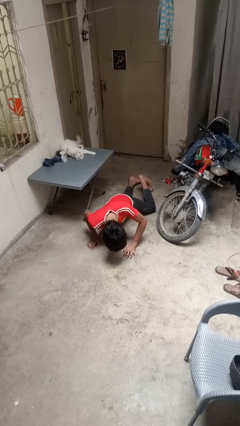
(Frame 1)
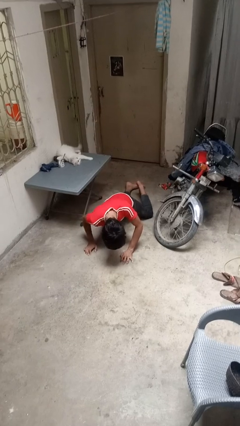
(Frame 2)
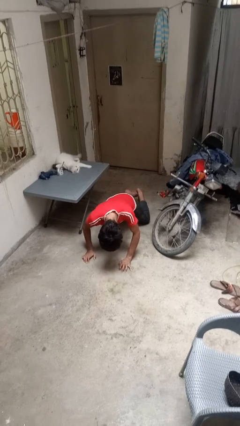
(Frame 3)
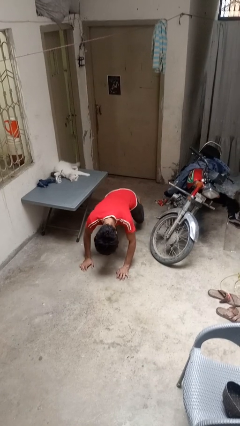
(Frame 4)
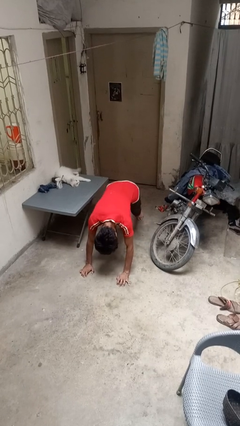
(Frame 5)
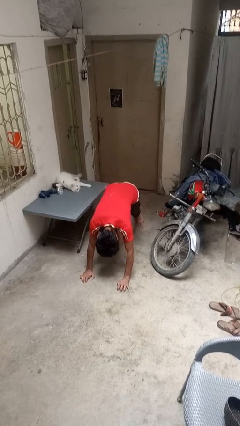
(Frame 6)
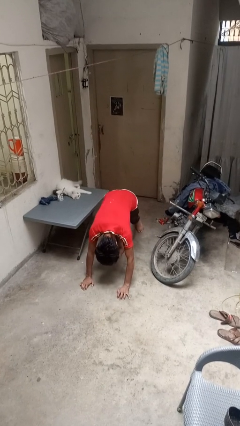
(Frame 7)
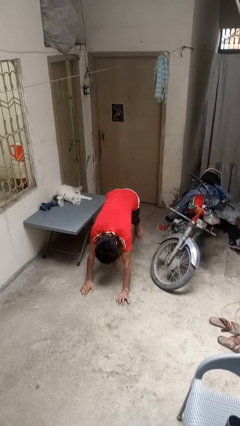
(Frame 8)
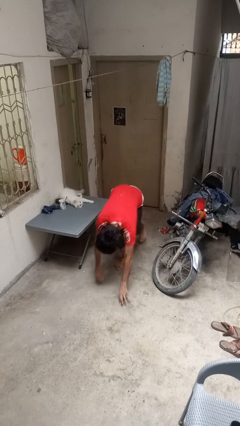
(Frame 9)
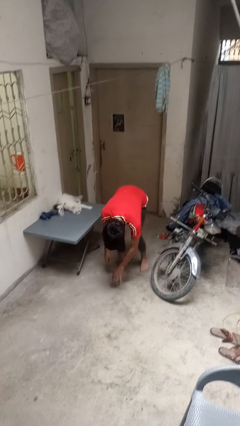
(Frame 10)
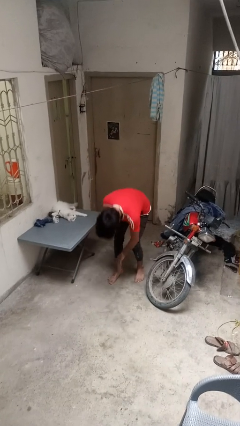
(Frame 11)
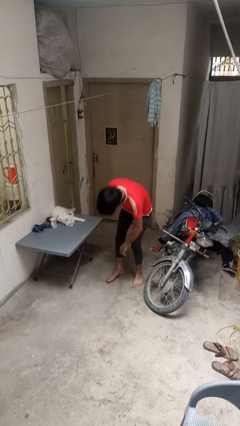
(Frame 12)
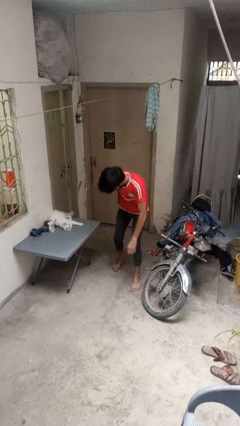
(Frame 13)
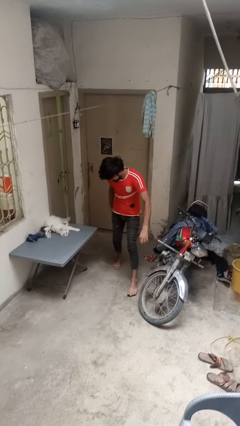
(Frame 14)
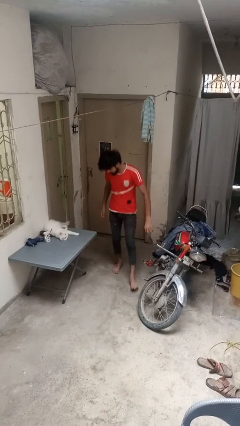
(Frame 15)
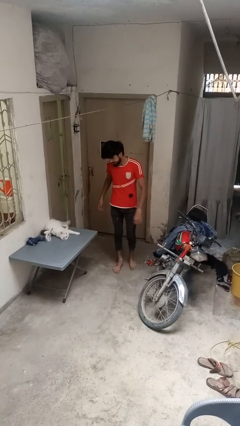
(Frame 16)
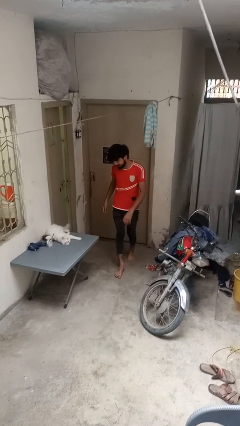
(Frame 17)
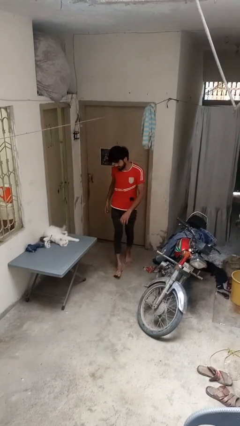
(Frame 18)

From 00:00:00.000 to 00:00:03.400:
person stands up from floor

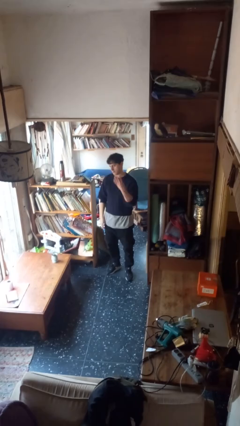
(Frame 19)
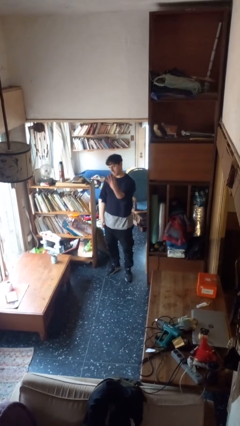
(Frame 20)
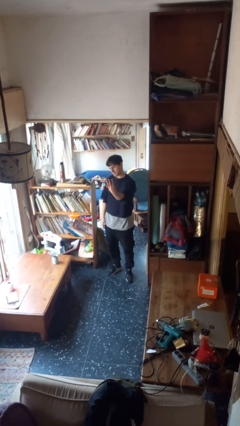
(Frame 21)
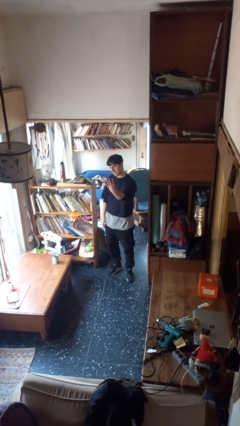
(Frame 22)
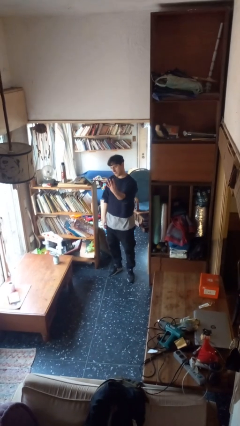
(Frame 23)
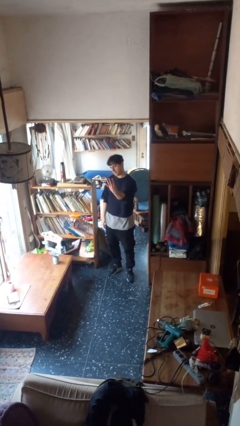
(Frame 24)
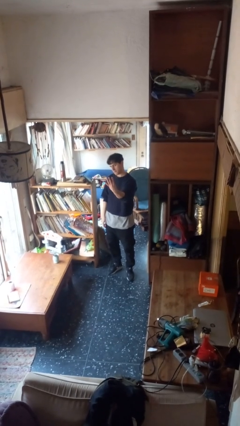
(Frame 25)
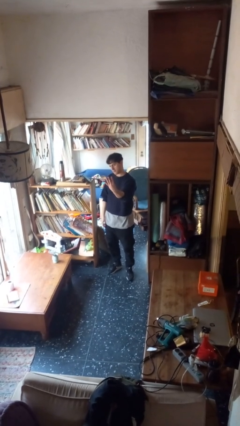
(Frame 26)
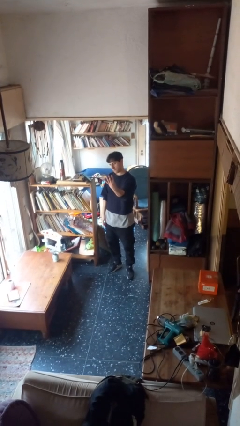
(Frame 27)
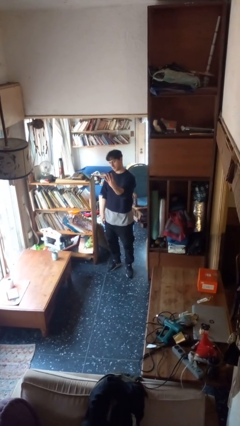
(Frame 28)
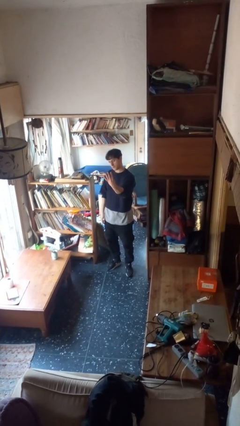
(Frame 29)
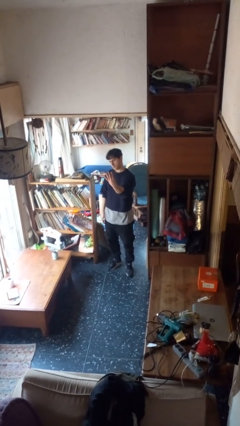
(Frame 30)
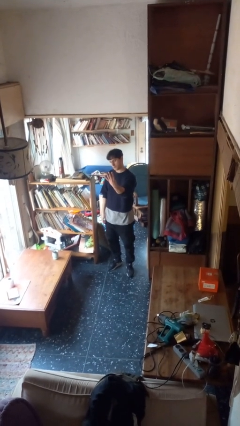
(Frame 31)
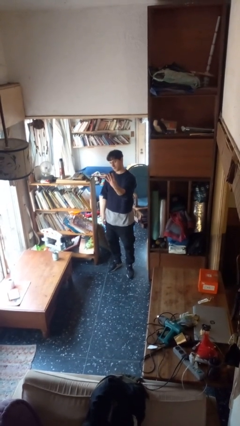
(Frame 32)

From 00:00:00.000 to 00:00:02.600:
person gestures number four

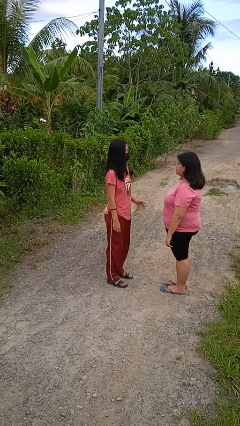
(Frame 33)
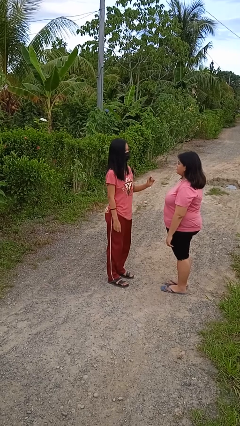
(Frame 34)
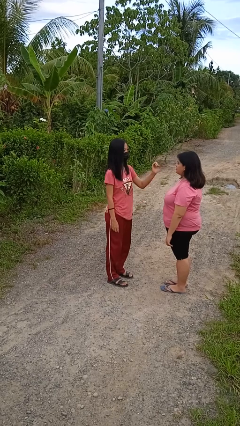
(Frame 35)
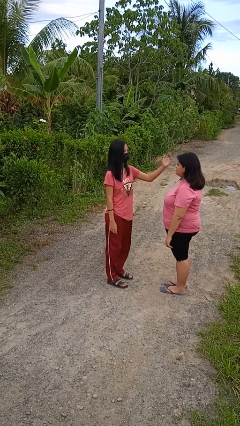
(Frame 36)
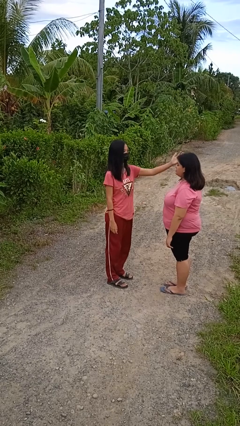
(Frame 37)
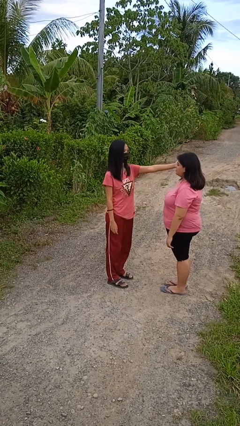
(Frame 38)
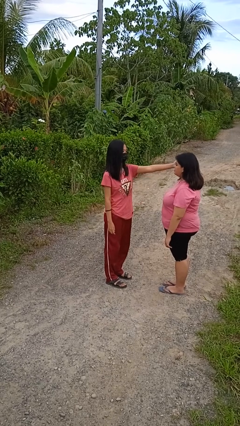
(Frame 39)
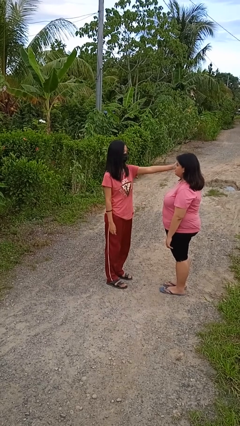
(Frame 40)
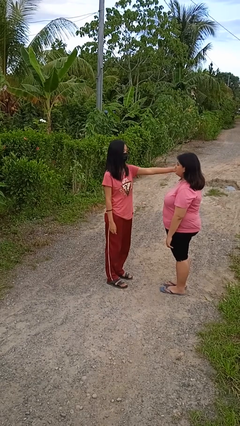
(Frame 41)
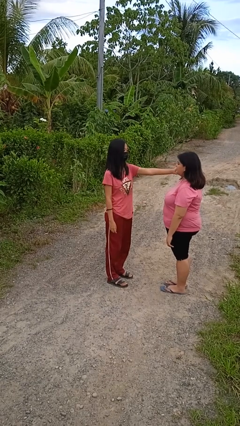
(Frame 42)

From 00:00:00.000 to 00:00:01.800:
person touches face of person

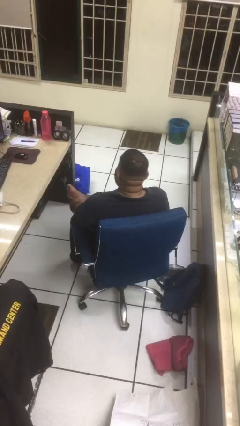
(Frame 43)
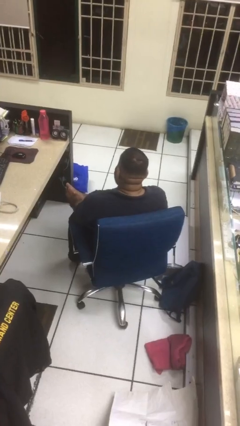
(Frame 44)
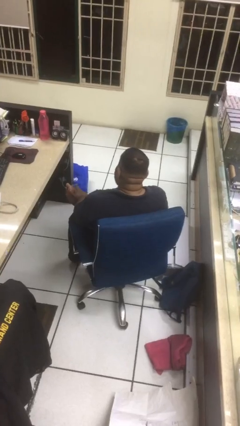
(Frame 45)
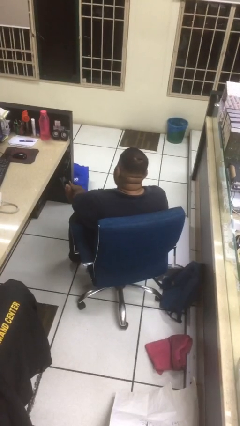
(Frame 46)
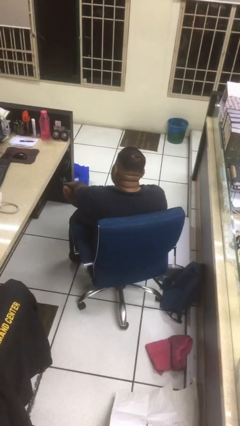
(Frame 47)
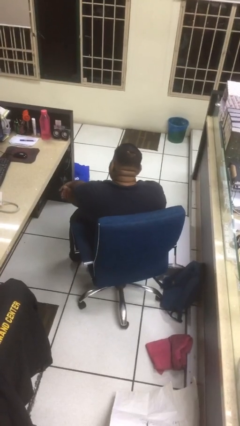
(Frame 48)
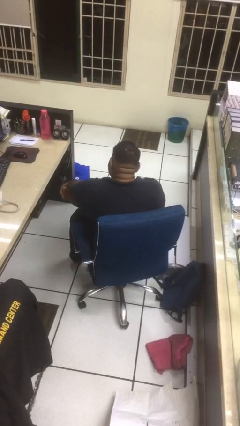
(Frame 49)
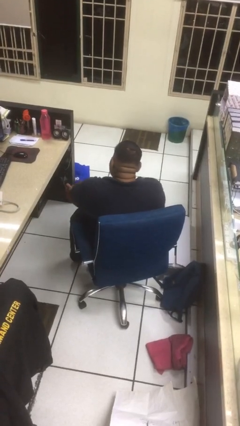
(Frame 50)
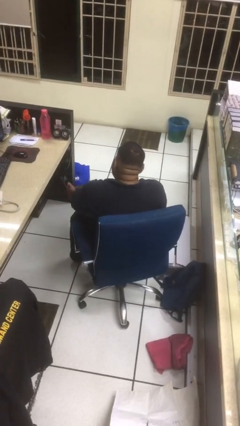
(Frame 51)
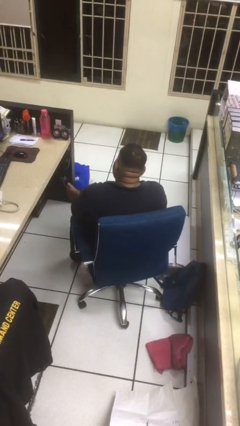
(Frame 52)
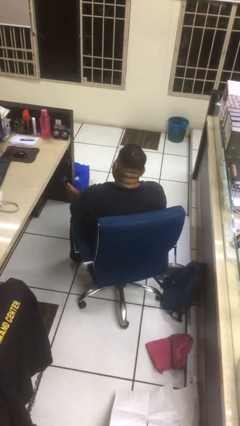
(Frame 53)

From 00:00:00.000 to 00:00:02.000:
person rubs foot

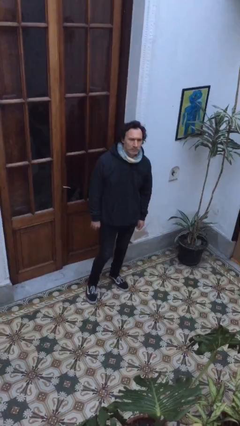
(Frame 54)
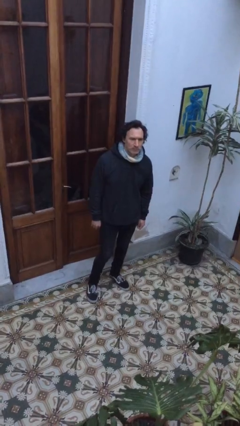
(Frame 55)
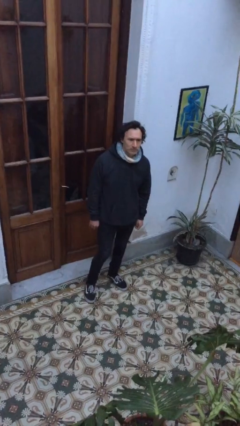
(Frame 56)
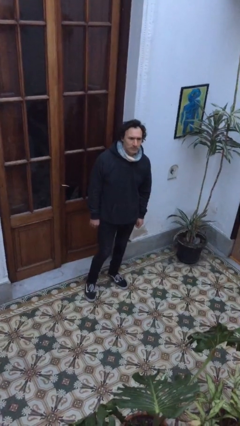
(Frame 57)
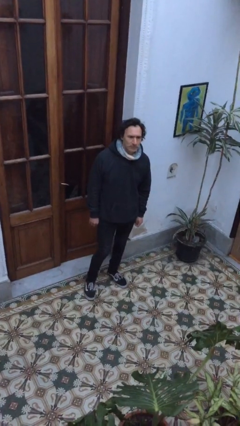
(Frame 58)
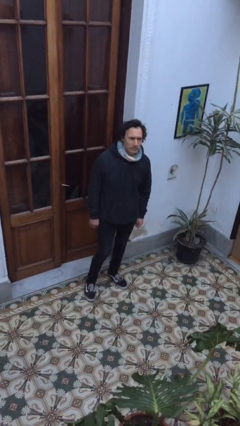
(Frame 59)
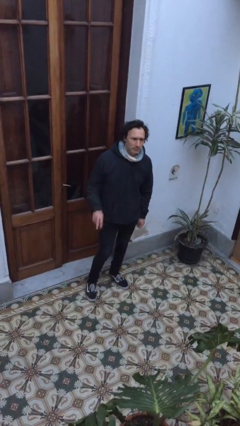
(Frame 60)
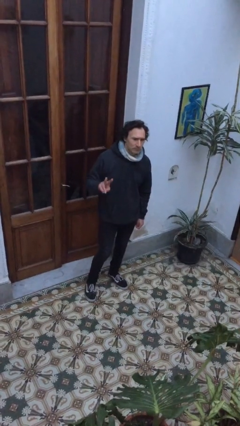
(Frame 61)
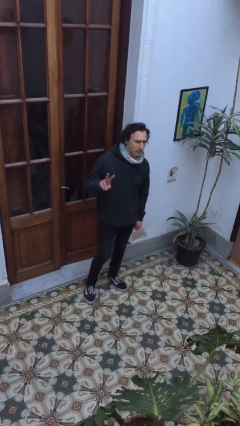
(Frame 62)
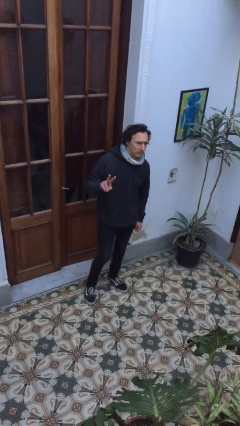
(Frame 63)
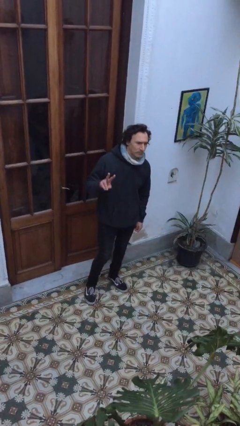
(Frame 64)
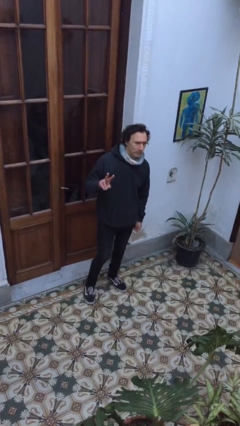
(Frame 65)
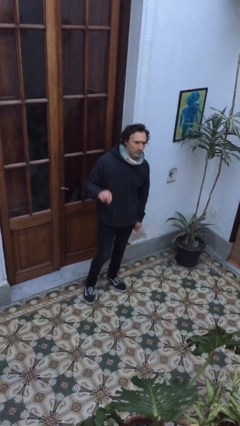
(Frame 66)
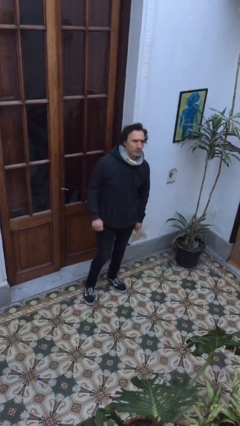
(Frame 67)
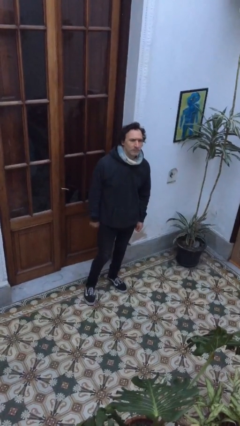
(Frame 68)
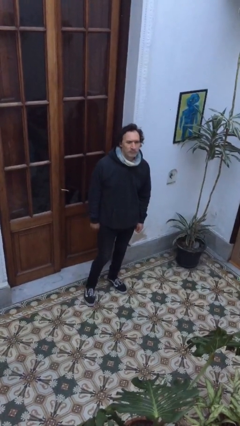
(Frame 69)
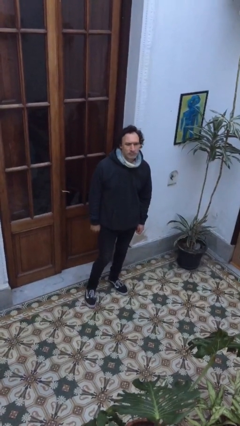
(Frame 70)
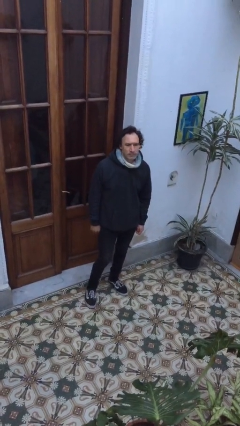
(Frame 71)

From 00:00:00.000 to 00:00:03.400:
person gestures peace

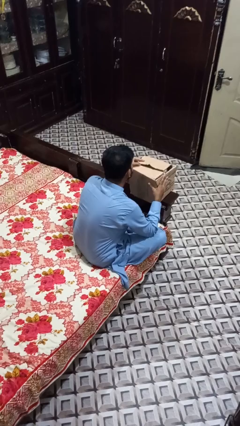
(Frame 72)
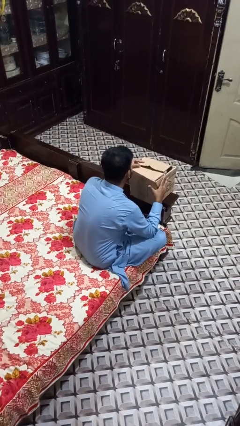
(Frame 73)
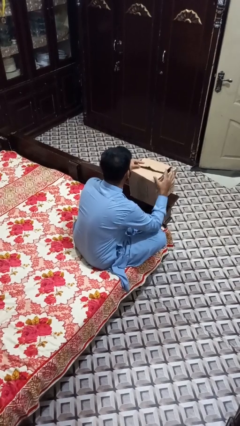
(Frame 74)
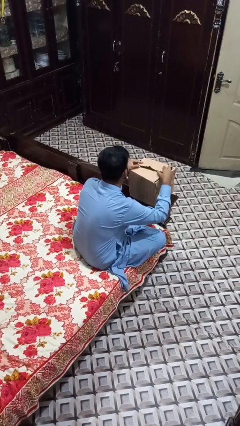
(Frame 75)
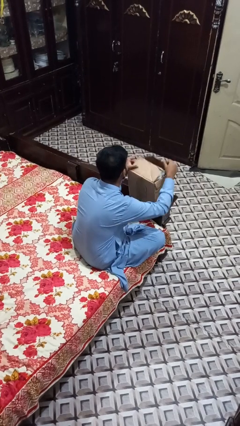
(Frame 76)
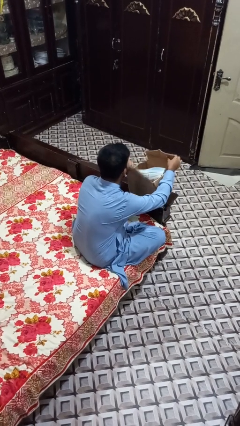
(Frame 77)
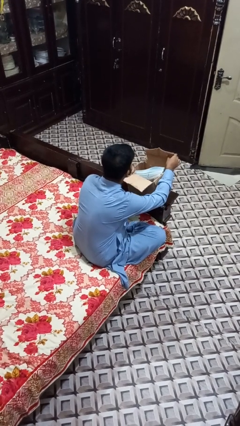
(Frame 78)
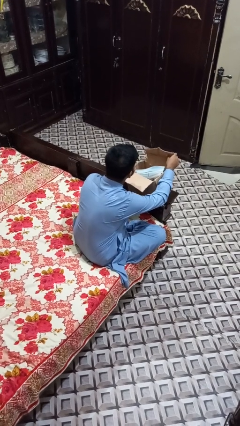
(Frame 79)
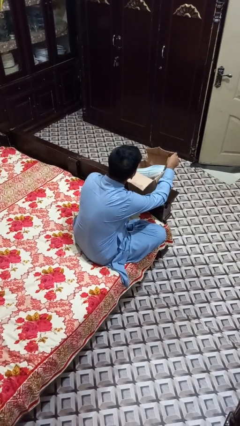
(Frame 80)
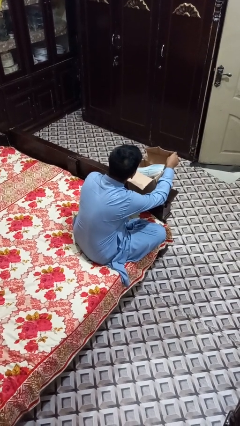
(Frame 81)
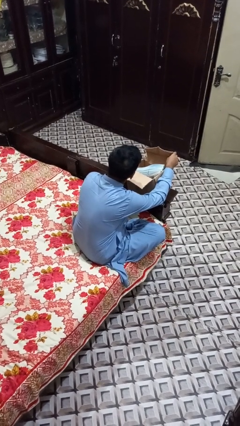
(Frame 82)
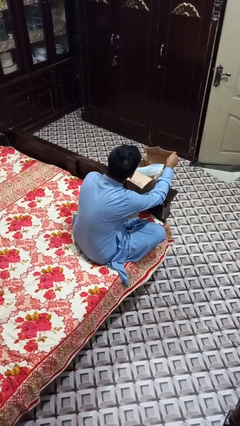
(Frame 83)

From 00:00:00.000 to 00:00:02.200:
person opens box

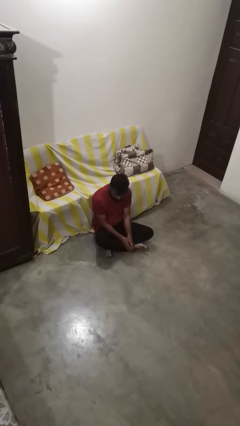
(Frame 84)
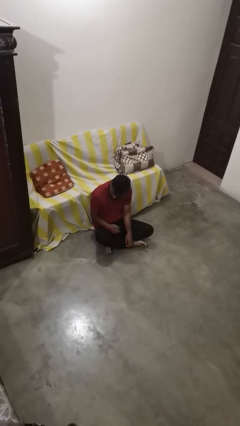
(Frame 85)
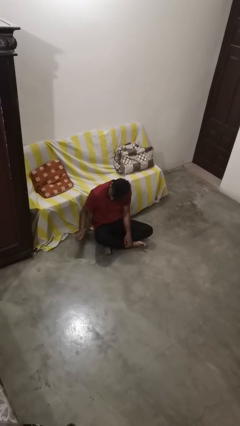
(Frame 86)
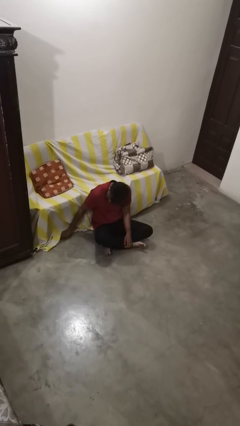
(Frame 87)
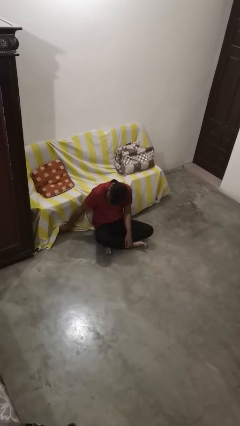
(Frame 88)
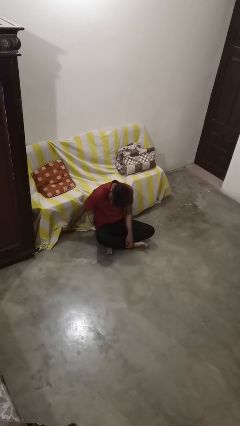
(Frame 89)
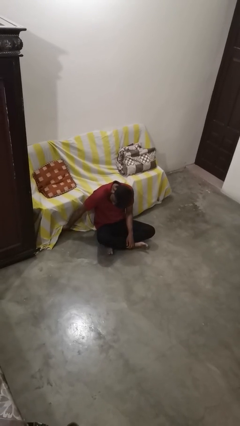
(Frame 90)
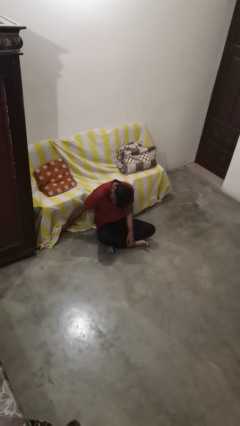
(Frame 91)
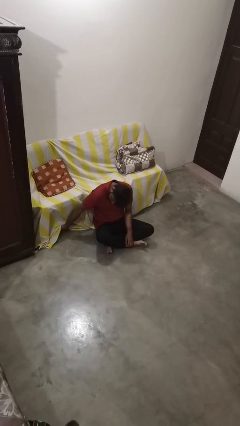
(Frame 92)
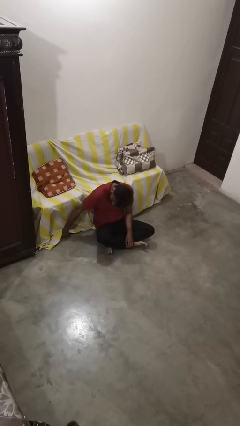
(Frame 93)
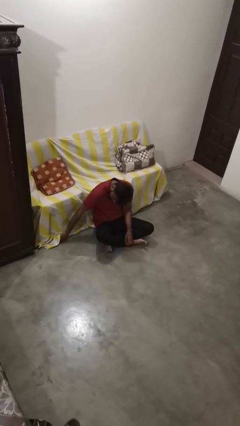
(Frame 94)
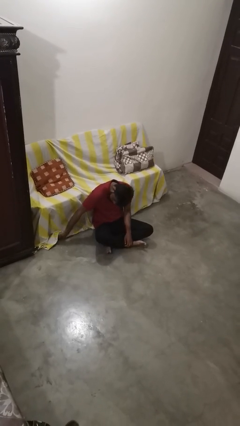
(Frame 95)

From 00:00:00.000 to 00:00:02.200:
person searches under couch
